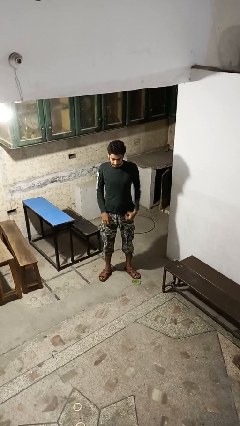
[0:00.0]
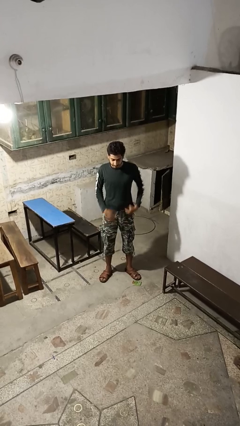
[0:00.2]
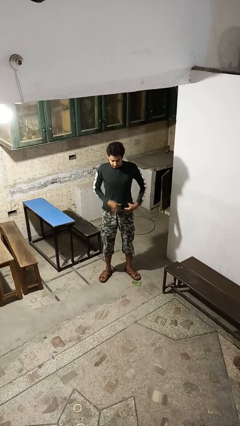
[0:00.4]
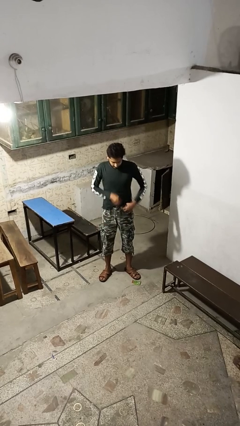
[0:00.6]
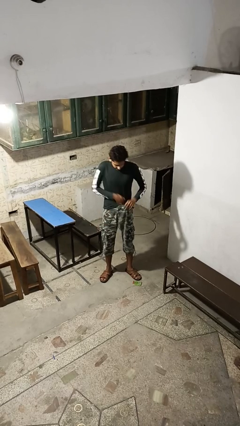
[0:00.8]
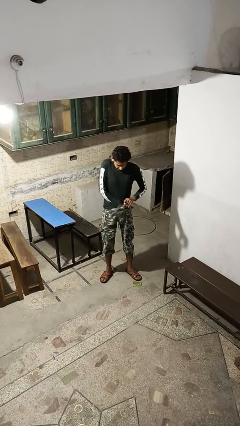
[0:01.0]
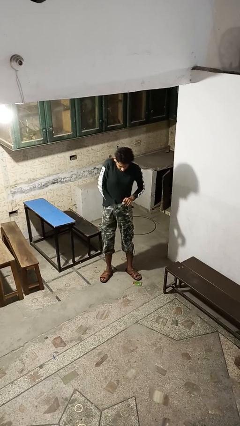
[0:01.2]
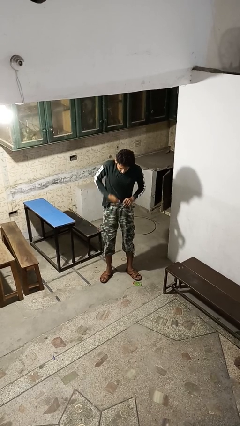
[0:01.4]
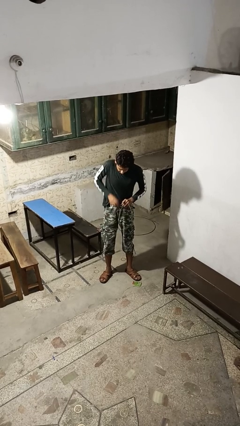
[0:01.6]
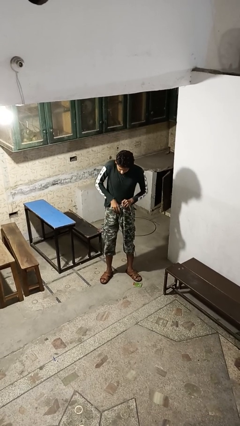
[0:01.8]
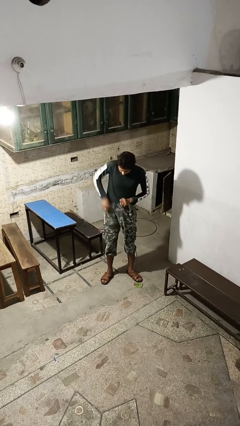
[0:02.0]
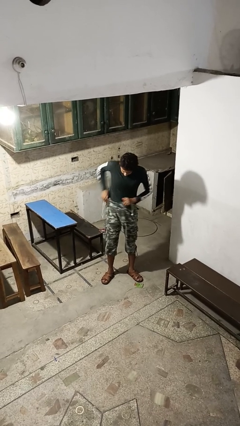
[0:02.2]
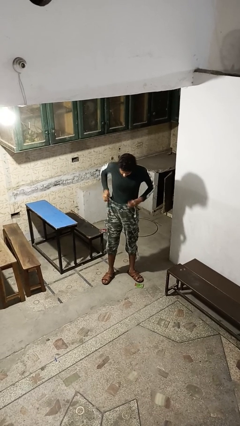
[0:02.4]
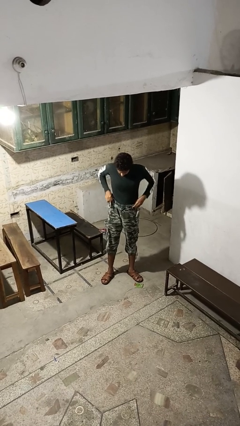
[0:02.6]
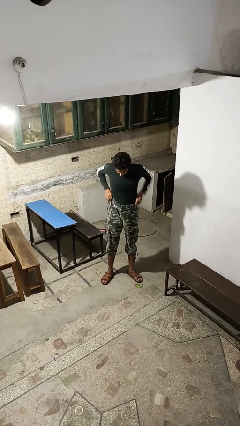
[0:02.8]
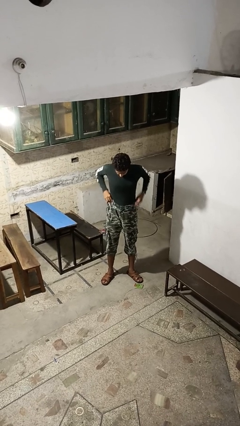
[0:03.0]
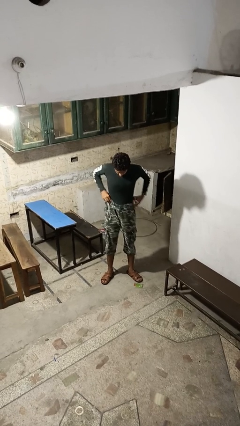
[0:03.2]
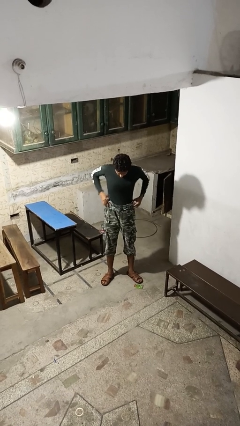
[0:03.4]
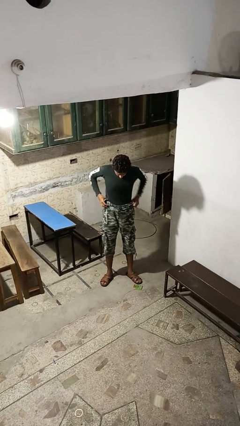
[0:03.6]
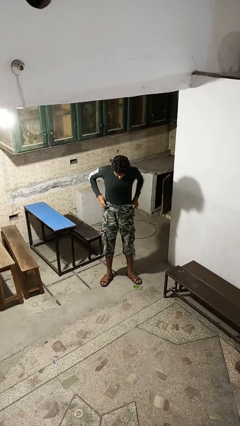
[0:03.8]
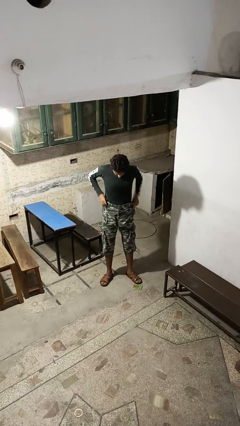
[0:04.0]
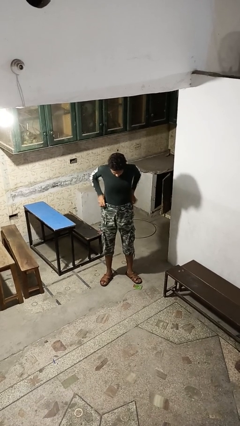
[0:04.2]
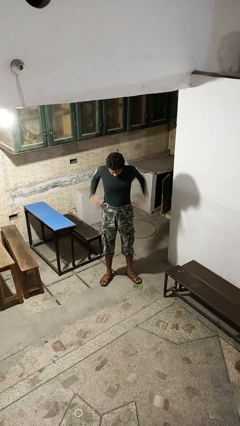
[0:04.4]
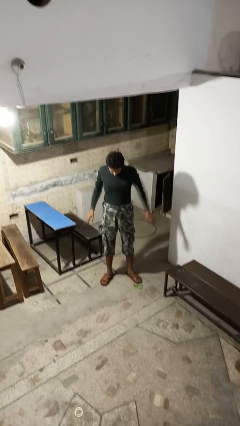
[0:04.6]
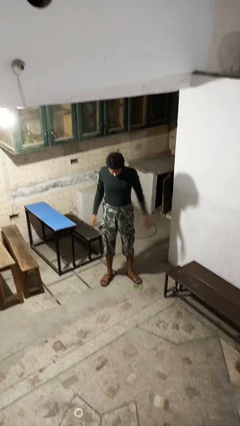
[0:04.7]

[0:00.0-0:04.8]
person tucks in shirt

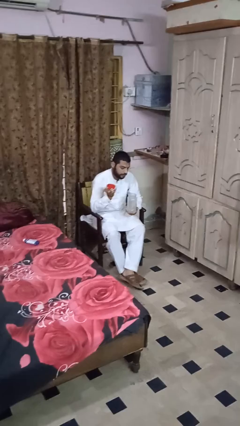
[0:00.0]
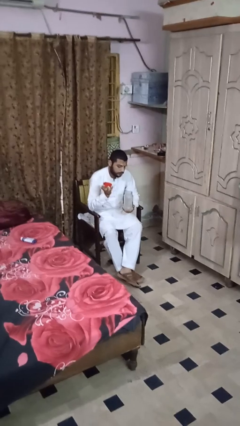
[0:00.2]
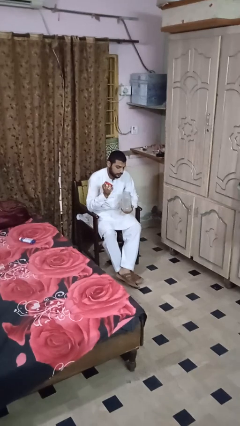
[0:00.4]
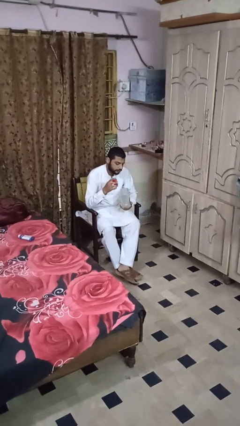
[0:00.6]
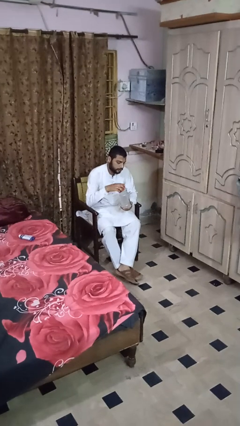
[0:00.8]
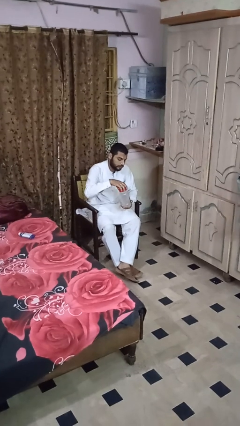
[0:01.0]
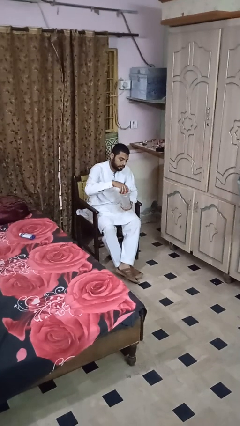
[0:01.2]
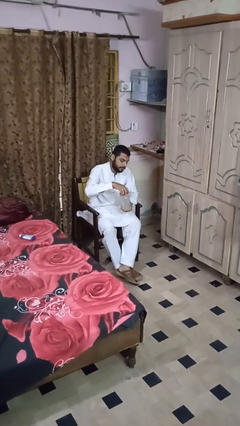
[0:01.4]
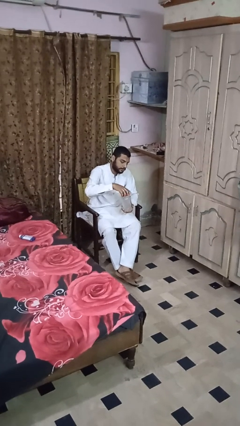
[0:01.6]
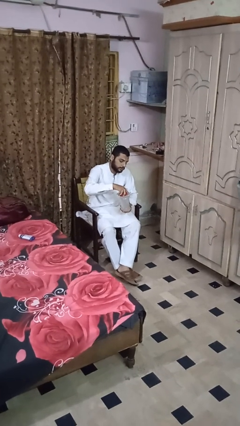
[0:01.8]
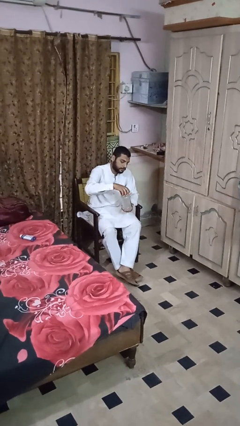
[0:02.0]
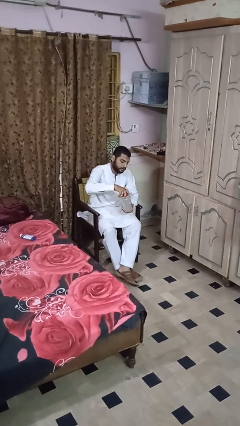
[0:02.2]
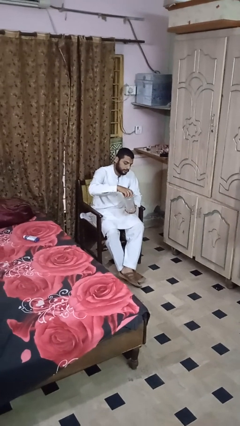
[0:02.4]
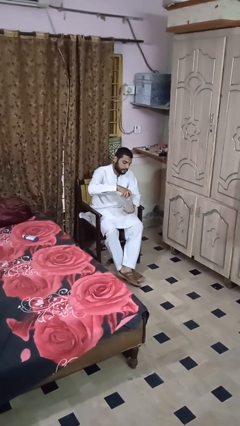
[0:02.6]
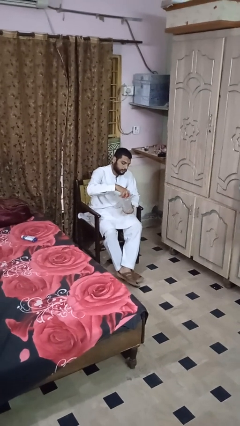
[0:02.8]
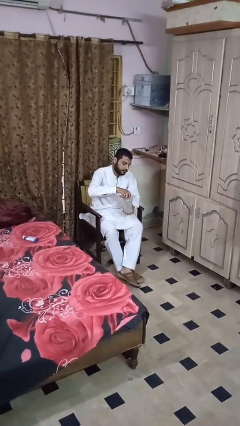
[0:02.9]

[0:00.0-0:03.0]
person closes jar

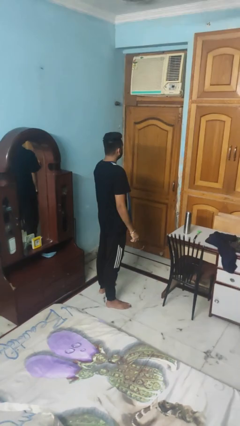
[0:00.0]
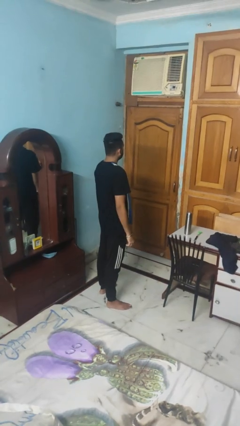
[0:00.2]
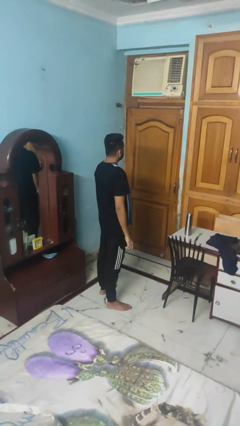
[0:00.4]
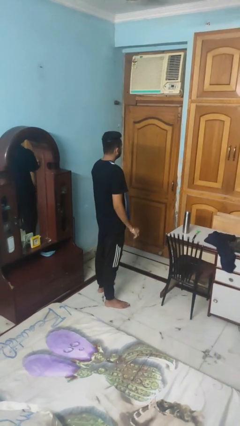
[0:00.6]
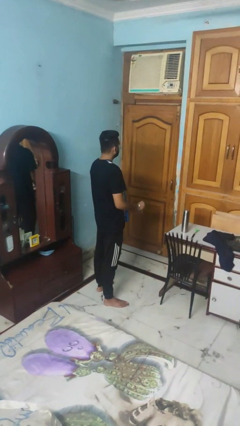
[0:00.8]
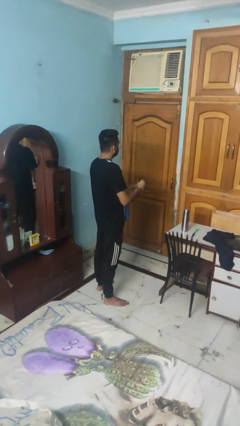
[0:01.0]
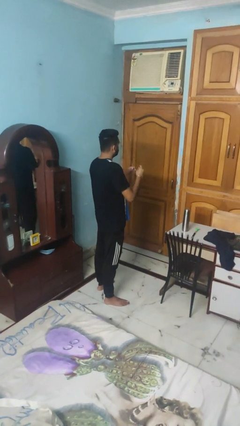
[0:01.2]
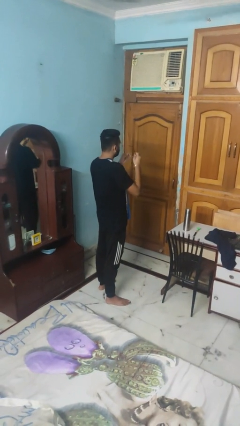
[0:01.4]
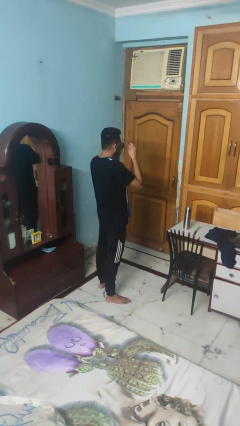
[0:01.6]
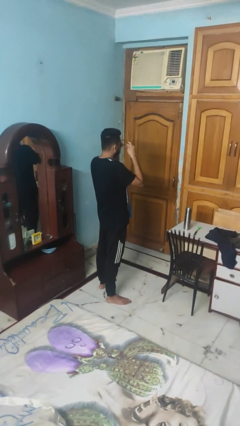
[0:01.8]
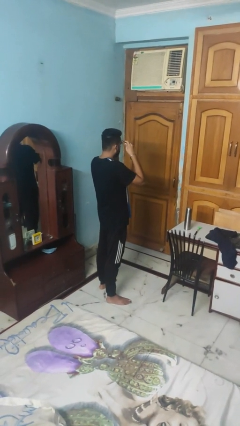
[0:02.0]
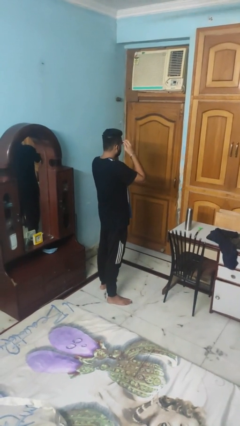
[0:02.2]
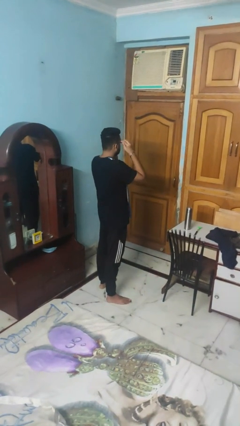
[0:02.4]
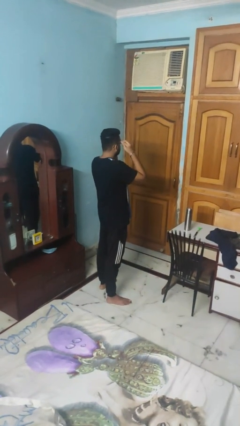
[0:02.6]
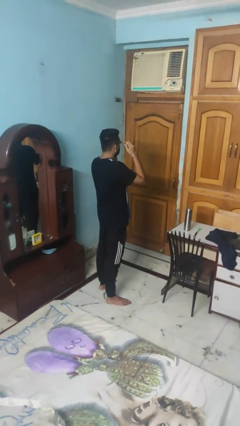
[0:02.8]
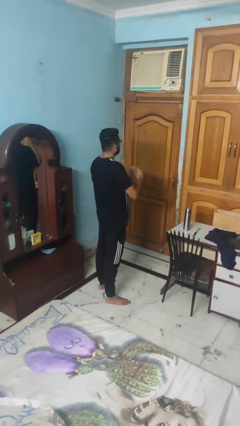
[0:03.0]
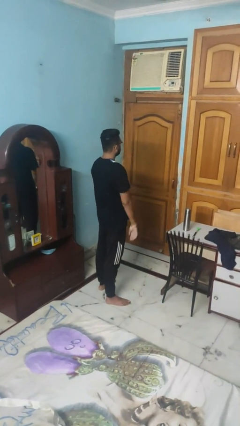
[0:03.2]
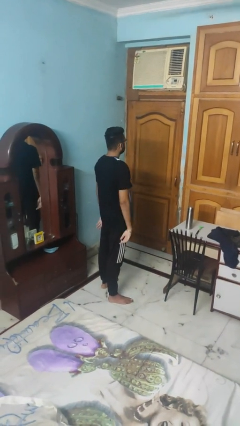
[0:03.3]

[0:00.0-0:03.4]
person puts on glasses

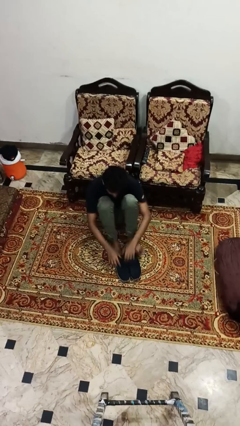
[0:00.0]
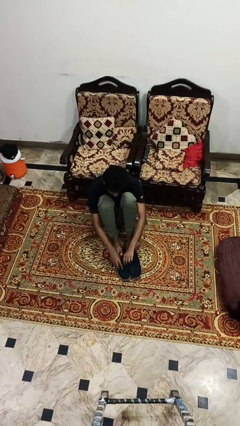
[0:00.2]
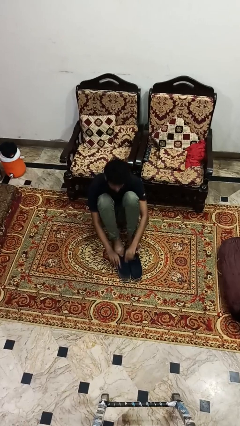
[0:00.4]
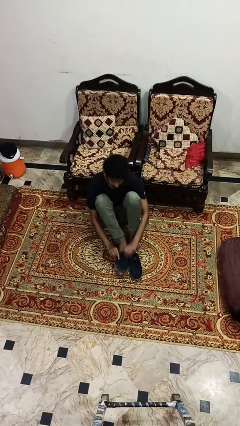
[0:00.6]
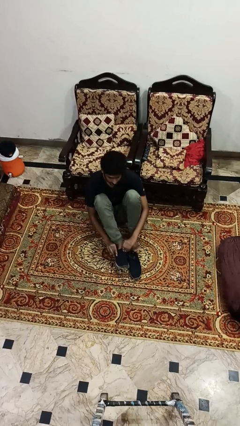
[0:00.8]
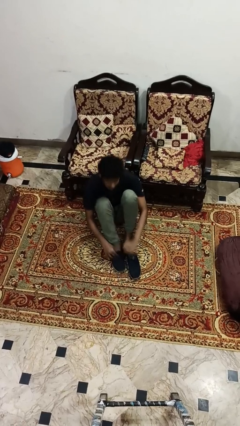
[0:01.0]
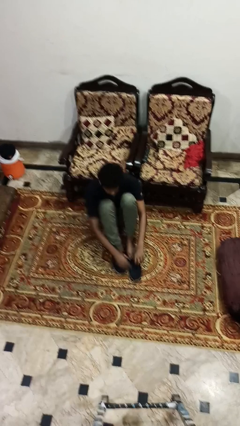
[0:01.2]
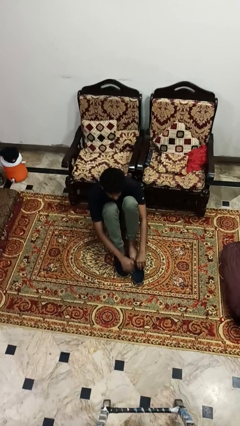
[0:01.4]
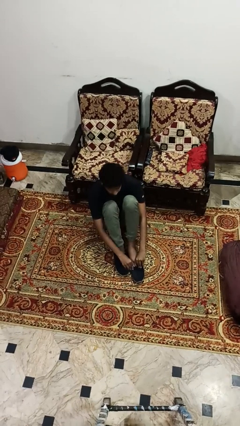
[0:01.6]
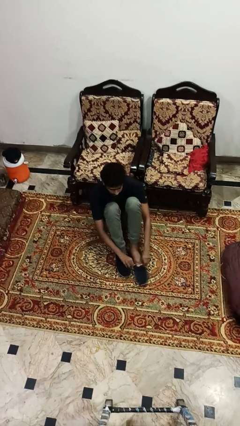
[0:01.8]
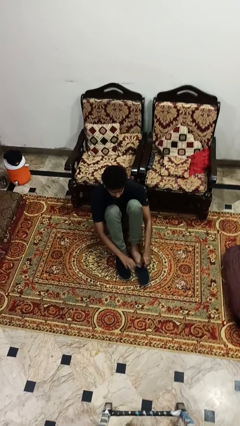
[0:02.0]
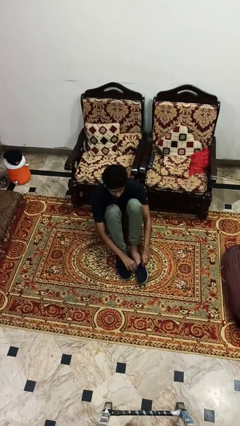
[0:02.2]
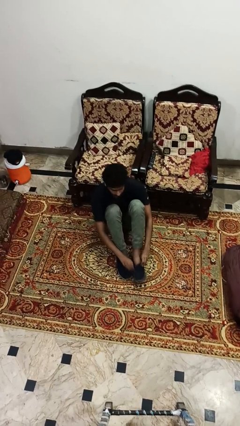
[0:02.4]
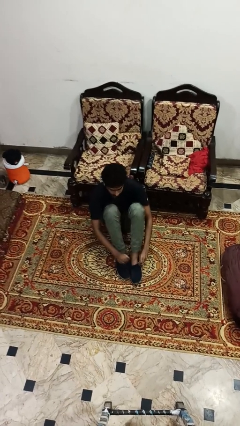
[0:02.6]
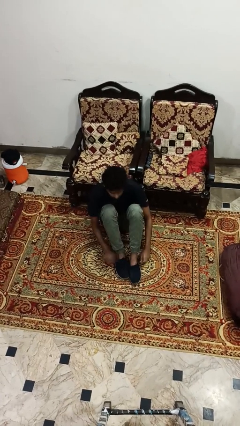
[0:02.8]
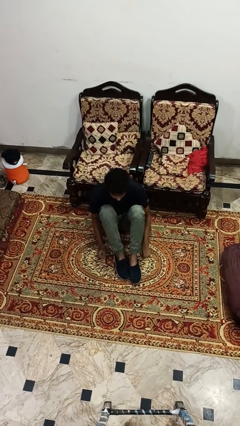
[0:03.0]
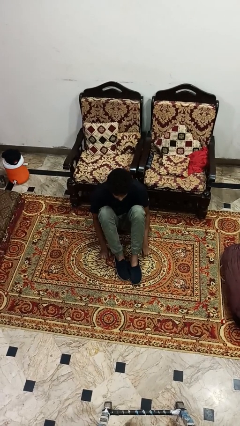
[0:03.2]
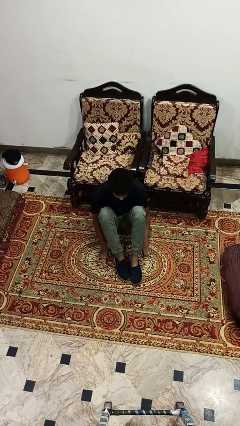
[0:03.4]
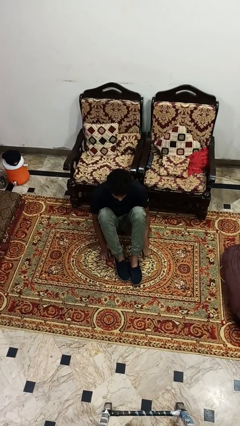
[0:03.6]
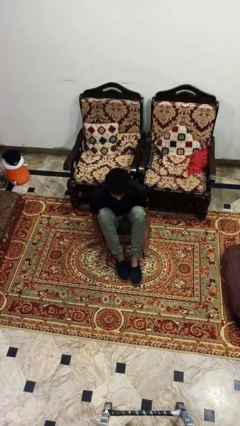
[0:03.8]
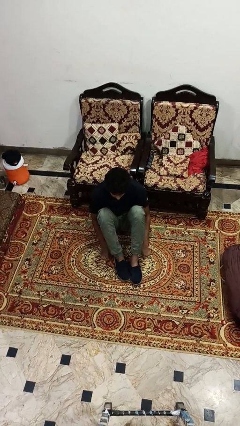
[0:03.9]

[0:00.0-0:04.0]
person puts on shoes

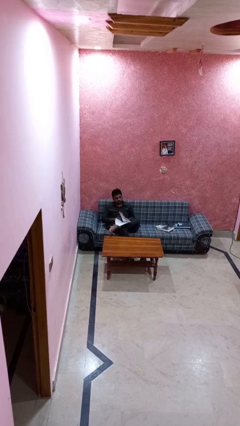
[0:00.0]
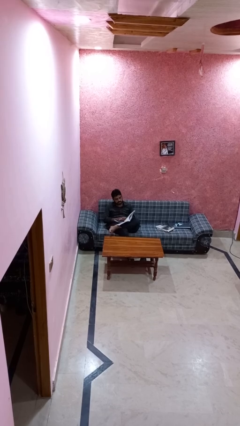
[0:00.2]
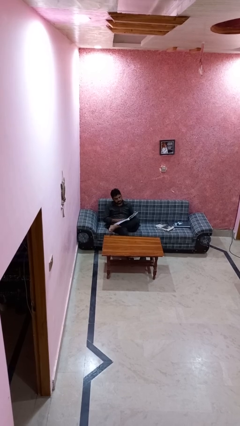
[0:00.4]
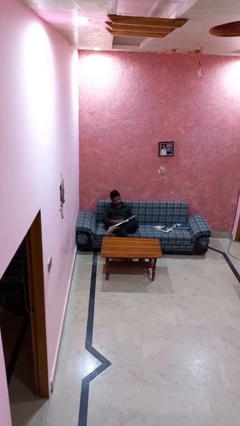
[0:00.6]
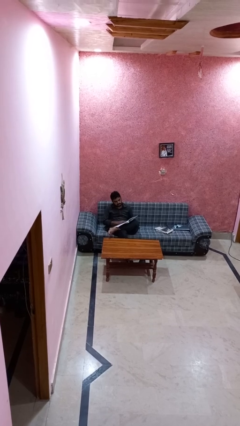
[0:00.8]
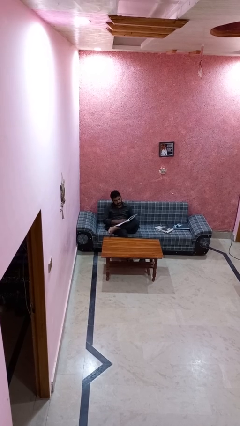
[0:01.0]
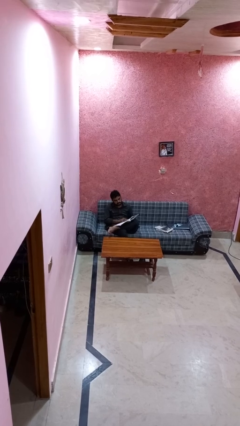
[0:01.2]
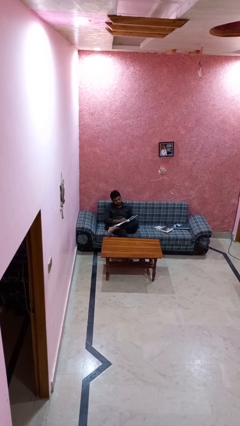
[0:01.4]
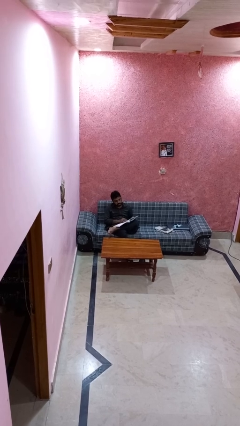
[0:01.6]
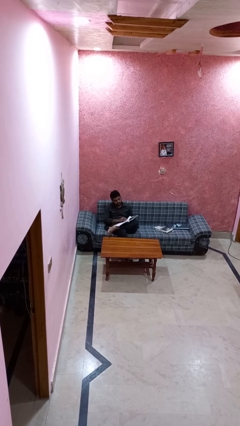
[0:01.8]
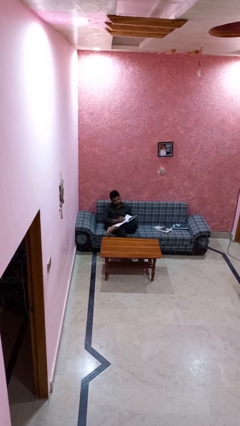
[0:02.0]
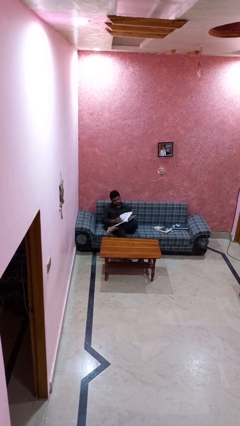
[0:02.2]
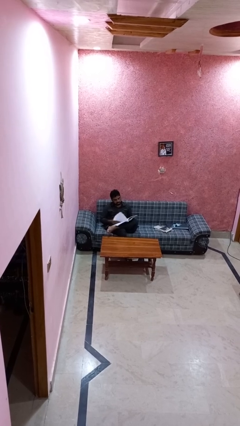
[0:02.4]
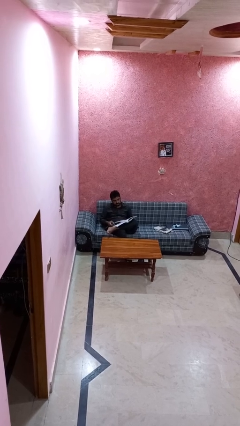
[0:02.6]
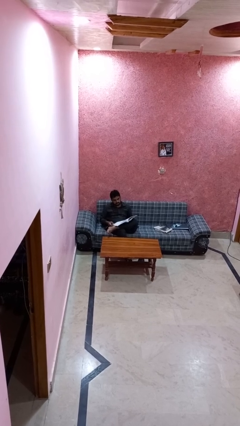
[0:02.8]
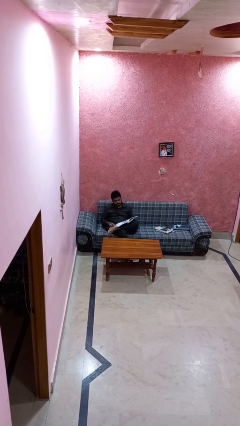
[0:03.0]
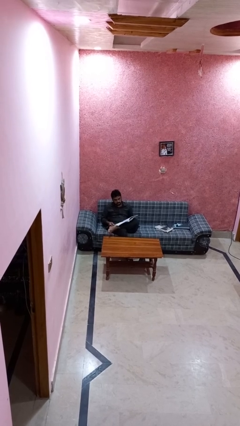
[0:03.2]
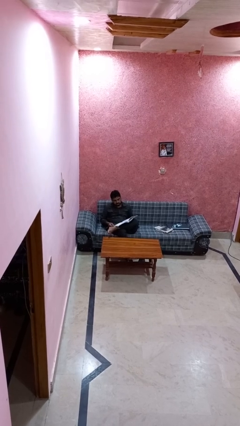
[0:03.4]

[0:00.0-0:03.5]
person reads magazine
